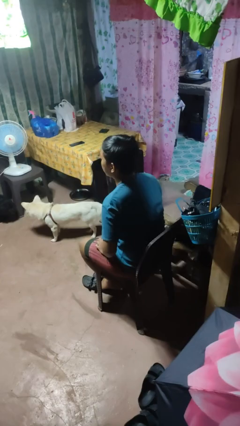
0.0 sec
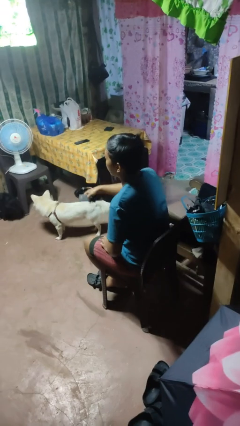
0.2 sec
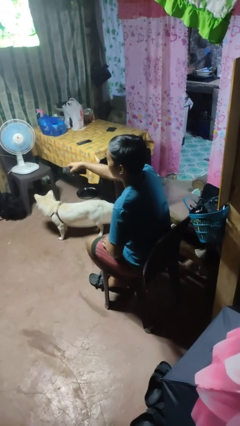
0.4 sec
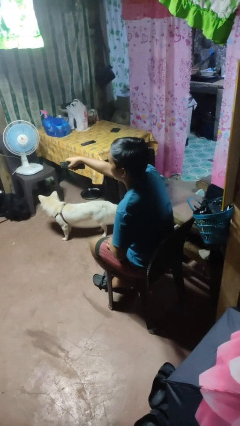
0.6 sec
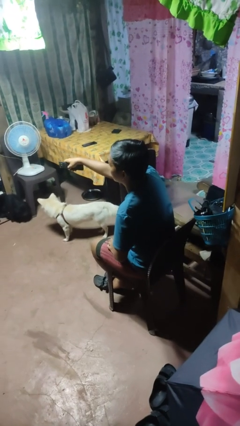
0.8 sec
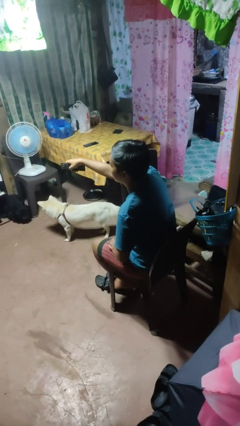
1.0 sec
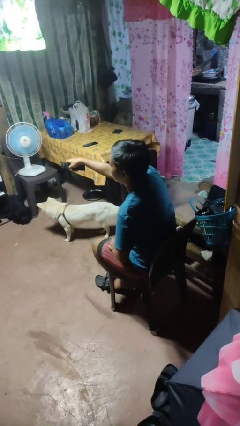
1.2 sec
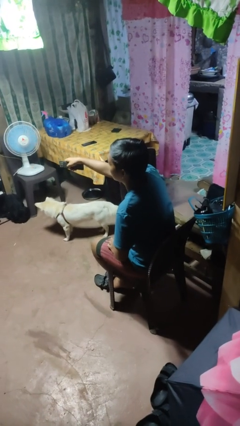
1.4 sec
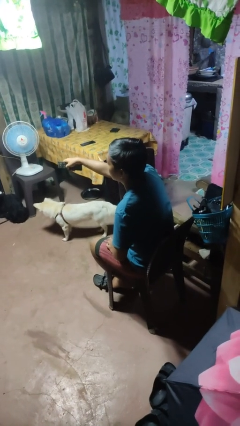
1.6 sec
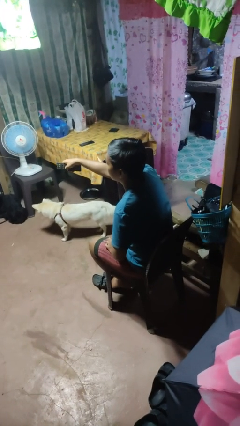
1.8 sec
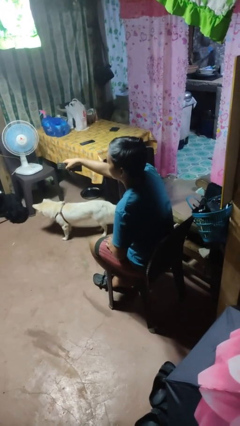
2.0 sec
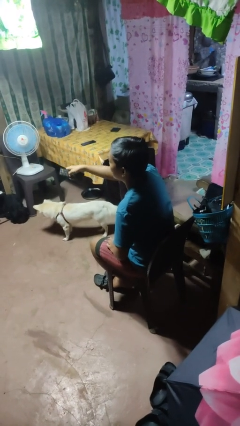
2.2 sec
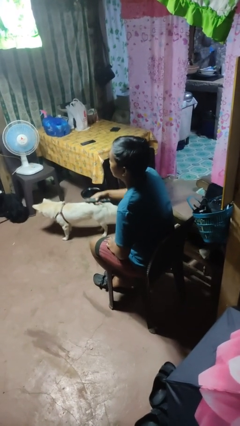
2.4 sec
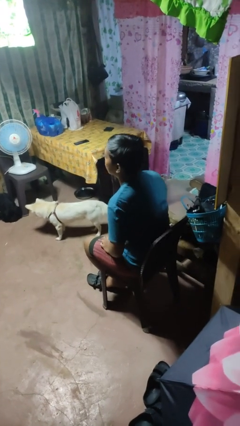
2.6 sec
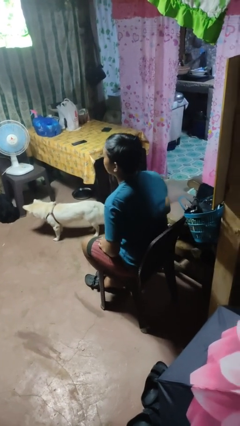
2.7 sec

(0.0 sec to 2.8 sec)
person uses television remote

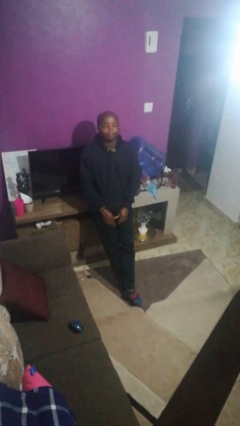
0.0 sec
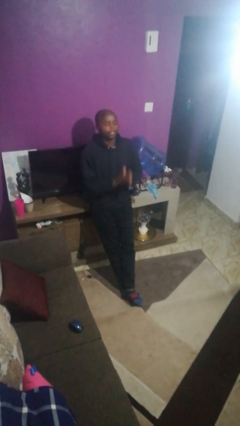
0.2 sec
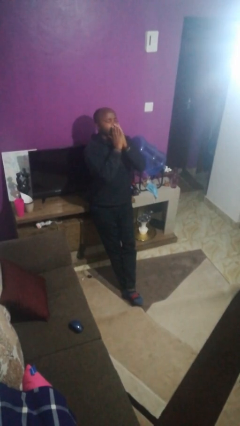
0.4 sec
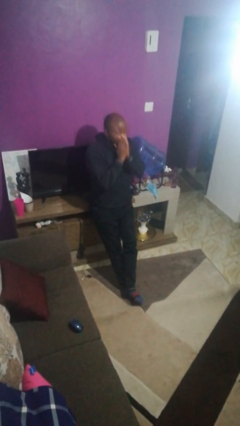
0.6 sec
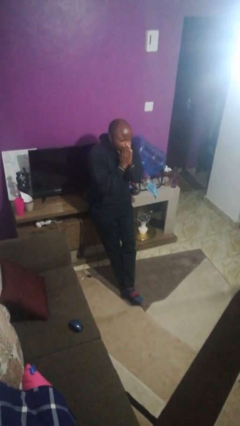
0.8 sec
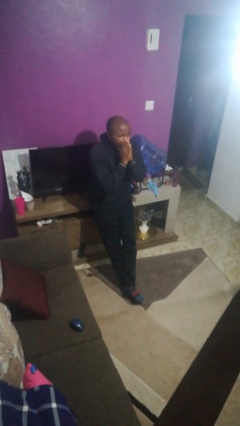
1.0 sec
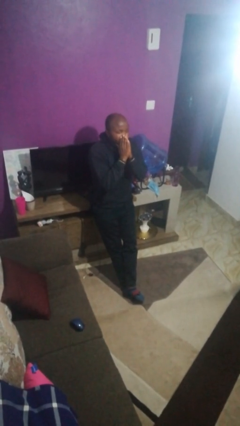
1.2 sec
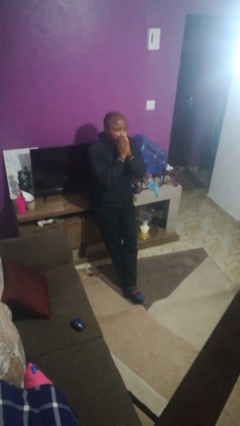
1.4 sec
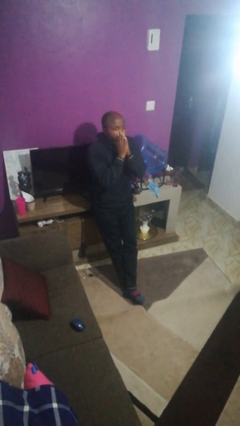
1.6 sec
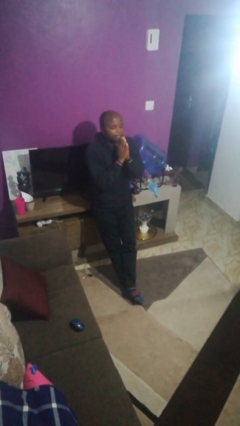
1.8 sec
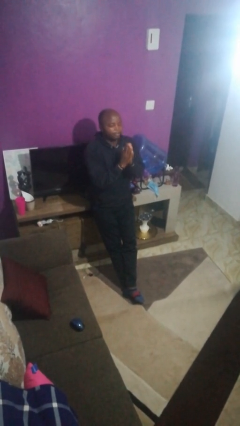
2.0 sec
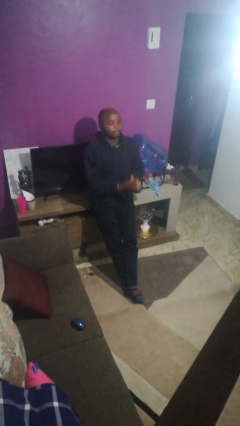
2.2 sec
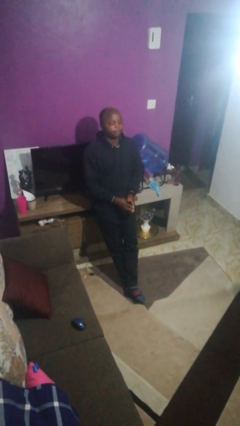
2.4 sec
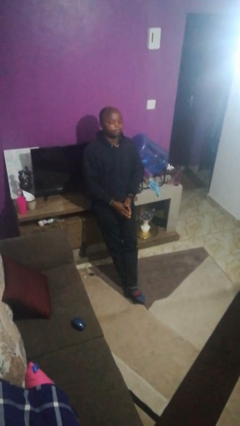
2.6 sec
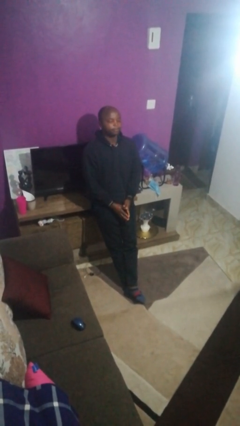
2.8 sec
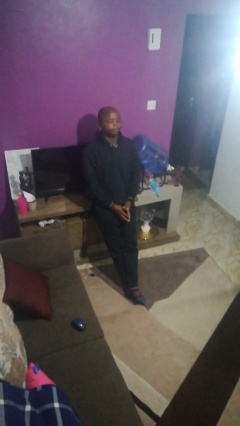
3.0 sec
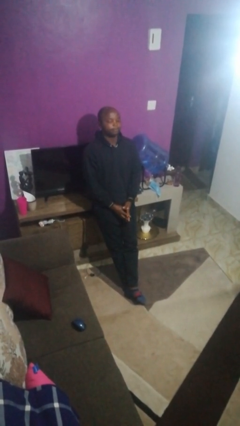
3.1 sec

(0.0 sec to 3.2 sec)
person sneezes into hand

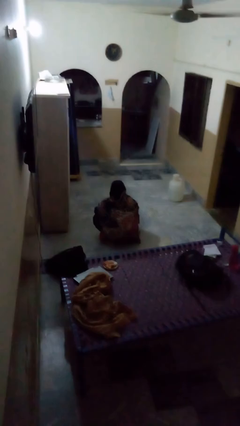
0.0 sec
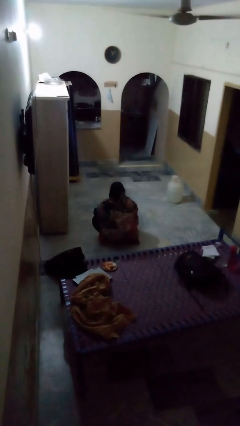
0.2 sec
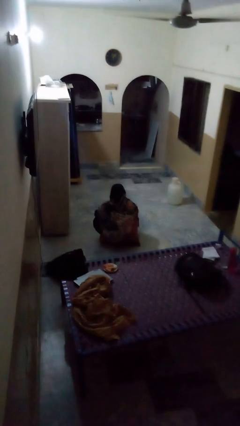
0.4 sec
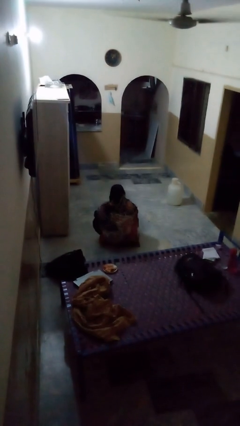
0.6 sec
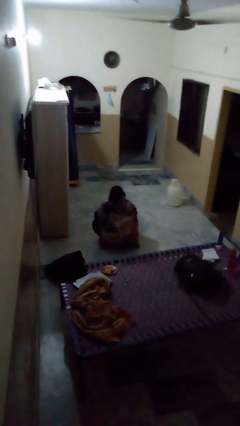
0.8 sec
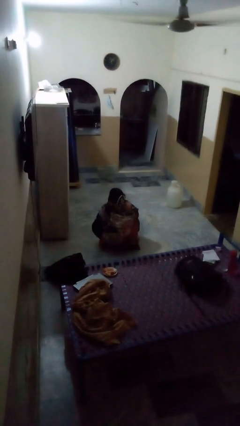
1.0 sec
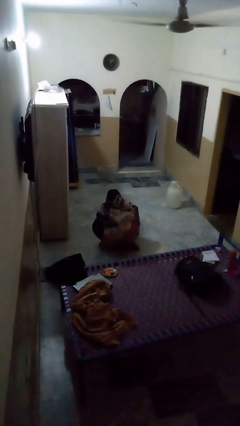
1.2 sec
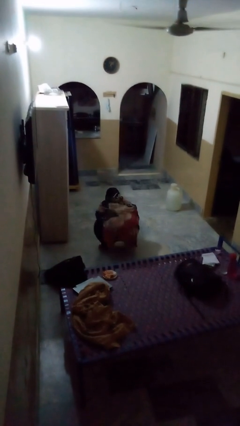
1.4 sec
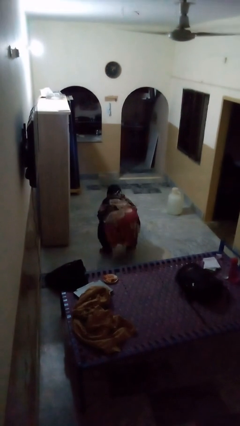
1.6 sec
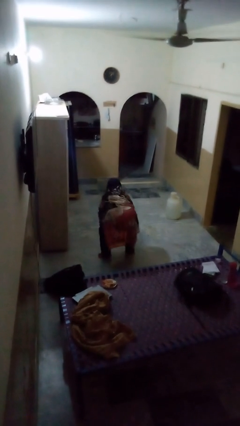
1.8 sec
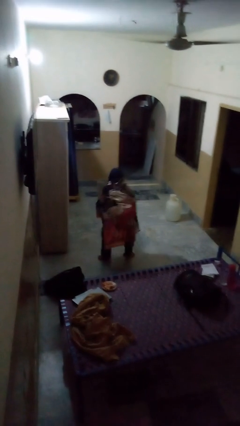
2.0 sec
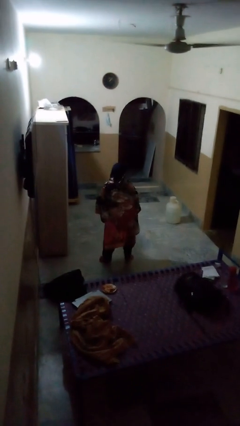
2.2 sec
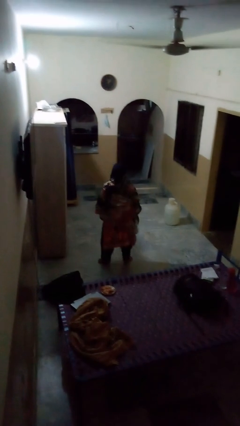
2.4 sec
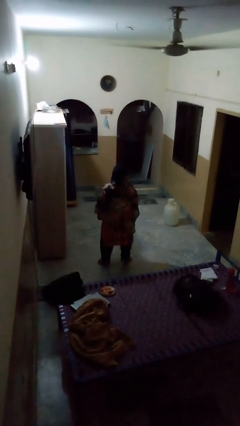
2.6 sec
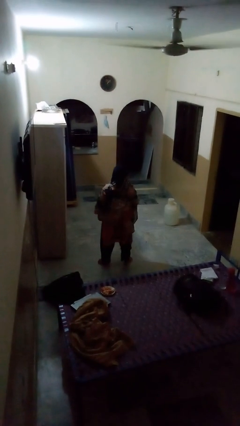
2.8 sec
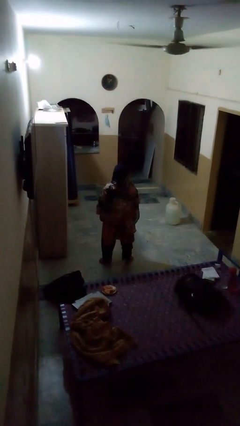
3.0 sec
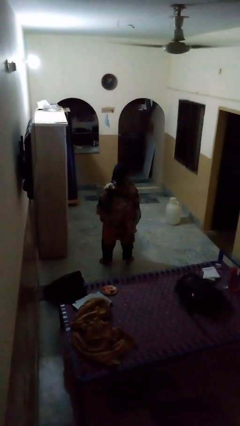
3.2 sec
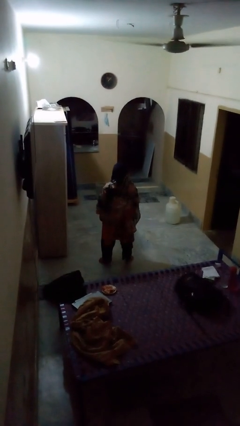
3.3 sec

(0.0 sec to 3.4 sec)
person stands up

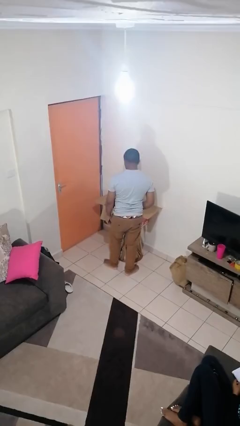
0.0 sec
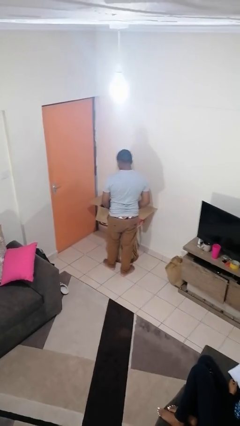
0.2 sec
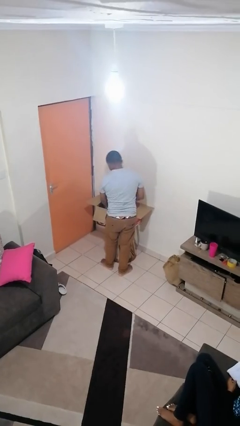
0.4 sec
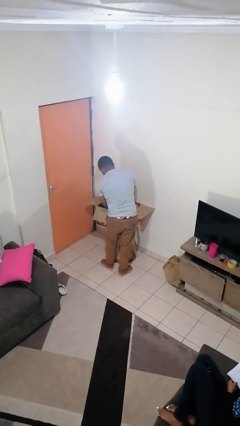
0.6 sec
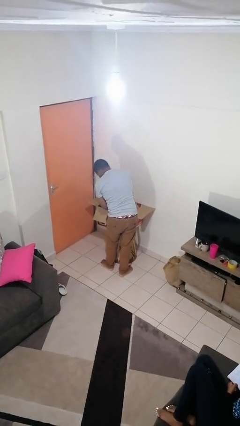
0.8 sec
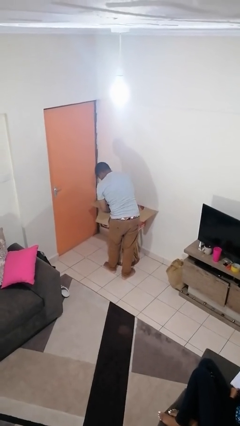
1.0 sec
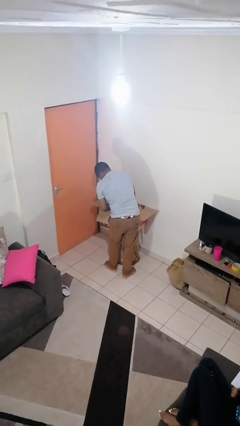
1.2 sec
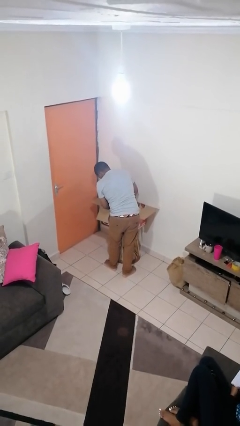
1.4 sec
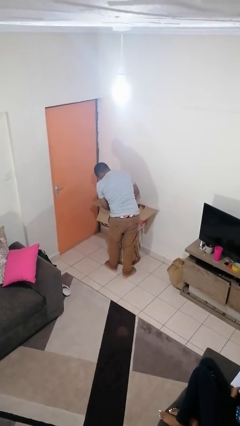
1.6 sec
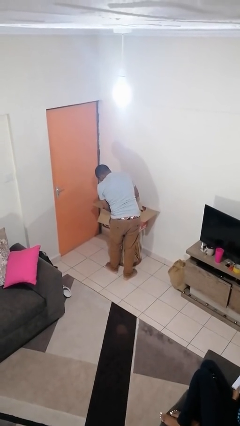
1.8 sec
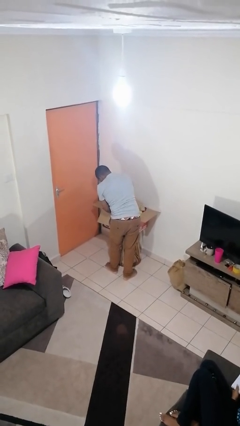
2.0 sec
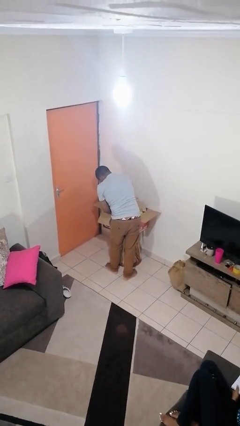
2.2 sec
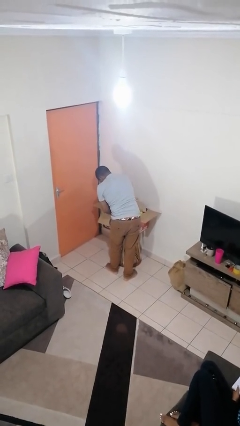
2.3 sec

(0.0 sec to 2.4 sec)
person searches in box

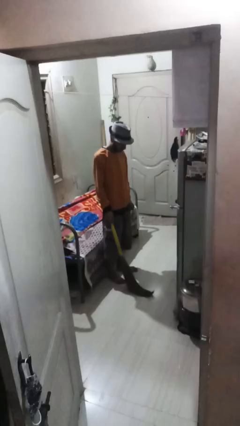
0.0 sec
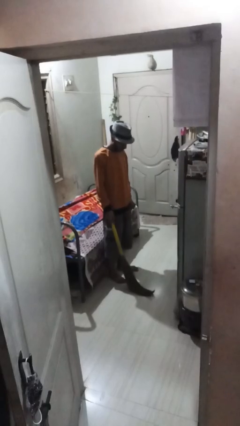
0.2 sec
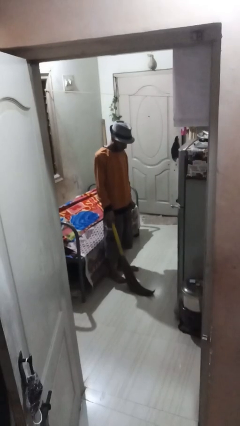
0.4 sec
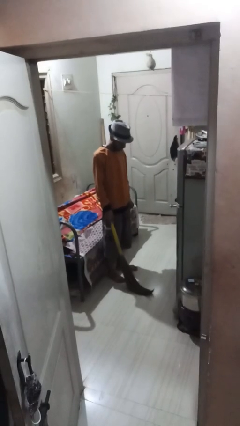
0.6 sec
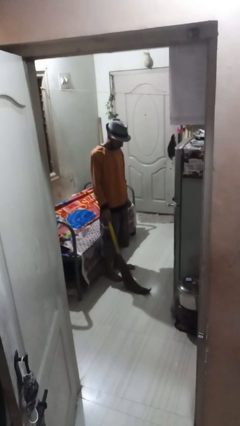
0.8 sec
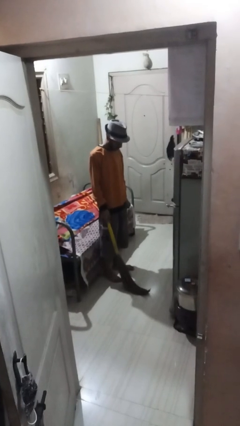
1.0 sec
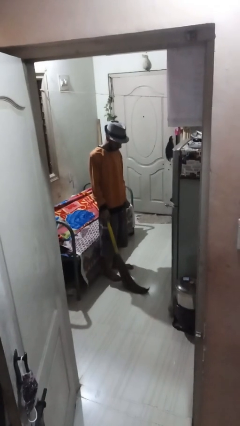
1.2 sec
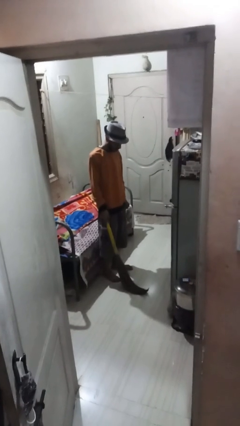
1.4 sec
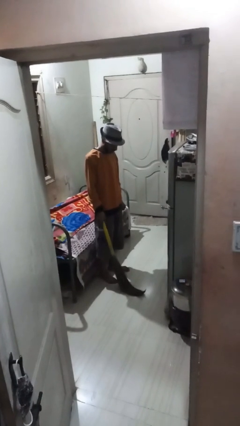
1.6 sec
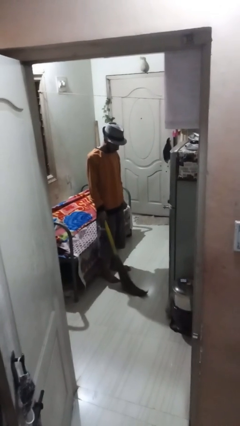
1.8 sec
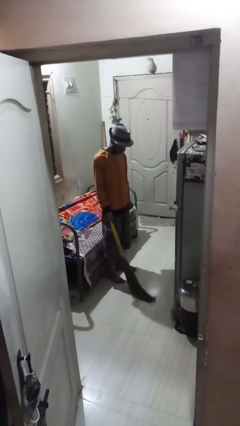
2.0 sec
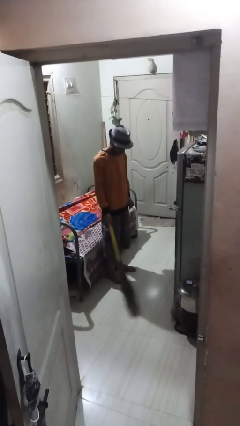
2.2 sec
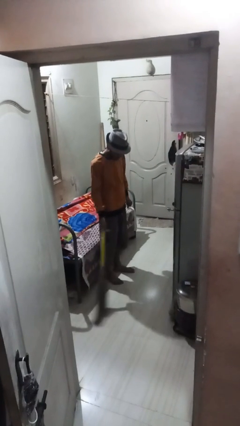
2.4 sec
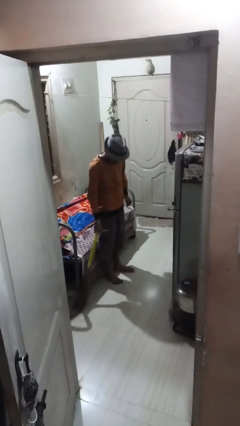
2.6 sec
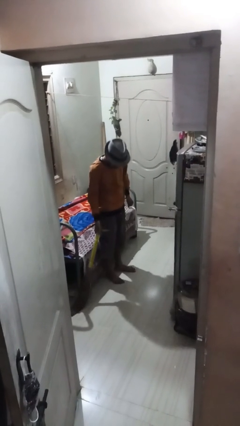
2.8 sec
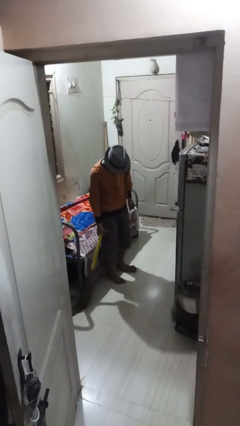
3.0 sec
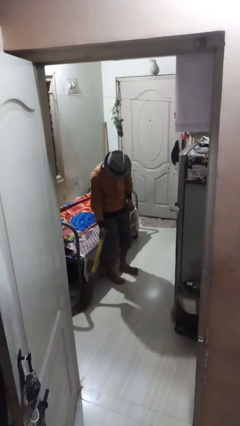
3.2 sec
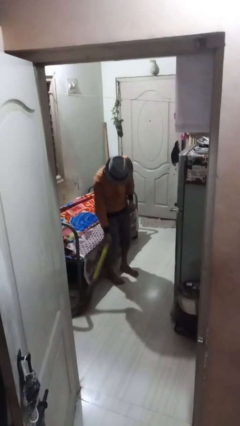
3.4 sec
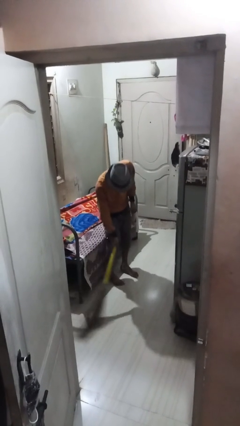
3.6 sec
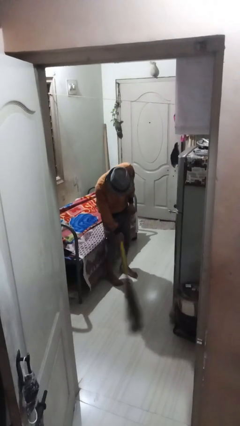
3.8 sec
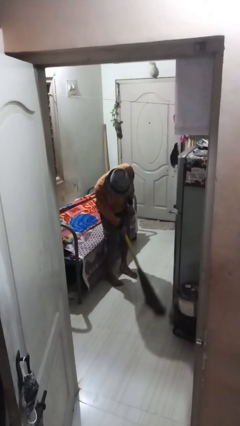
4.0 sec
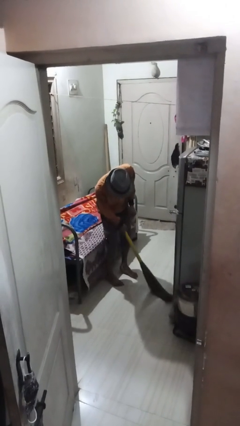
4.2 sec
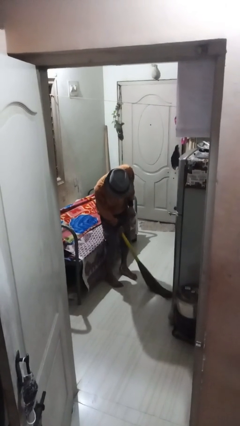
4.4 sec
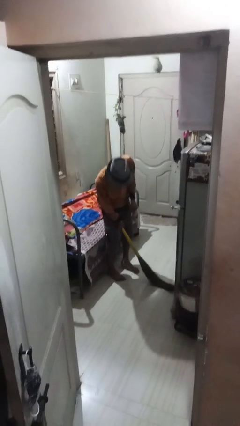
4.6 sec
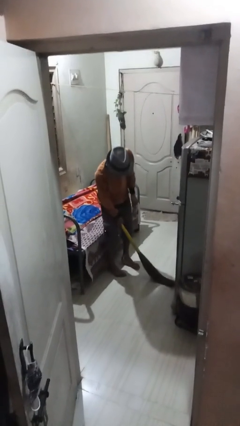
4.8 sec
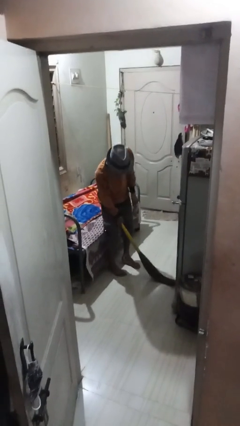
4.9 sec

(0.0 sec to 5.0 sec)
person sweeps floor

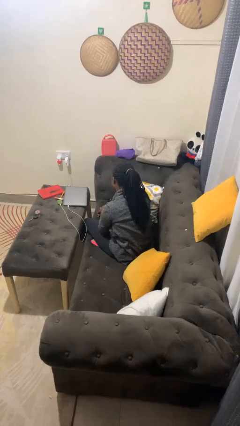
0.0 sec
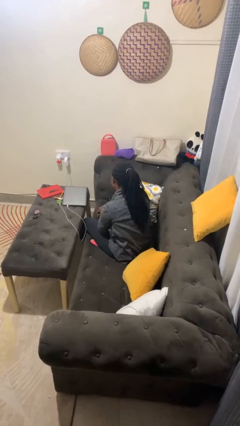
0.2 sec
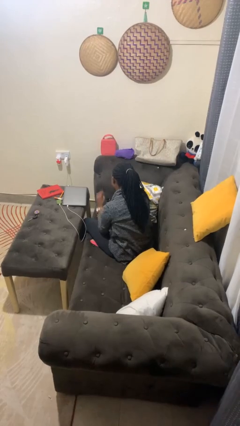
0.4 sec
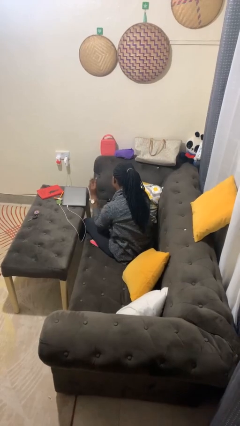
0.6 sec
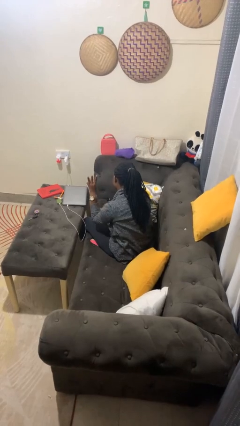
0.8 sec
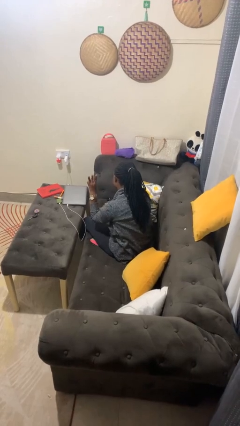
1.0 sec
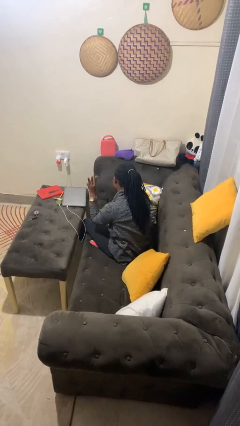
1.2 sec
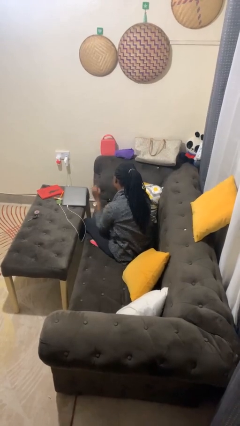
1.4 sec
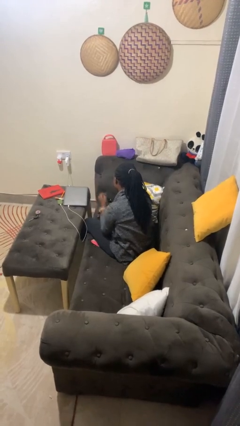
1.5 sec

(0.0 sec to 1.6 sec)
person gestures number three
